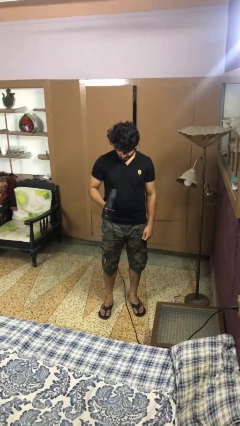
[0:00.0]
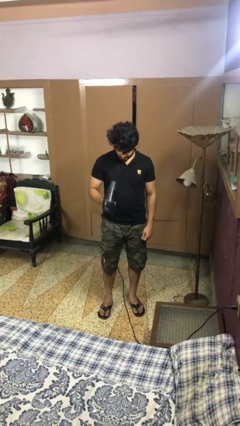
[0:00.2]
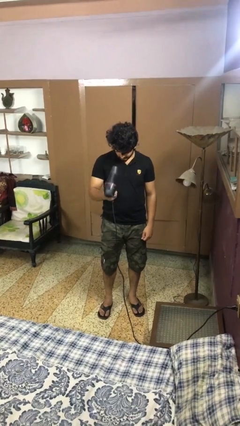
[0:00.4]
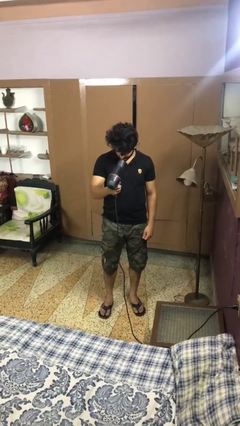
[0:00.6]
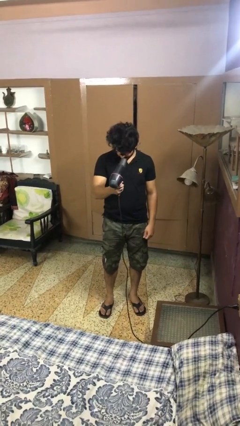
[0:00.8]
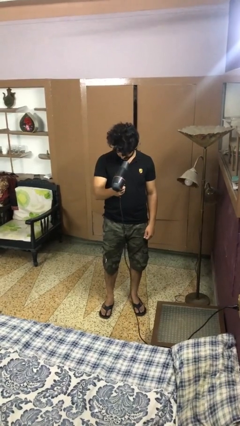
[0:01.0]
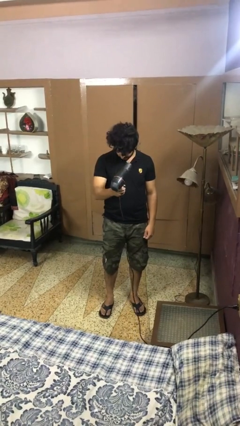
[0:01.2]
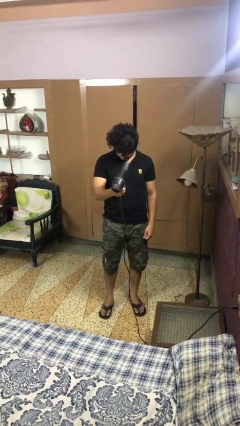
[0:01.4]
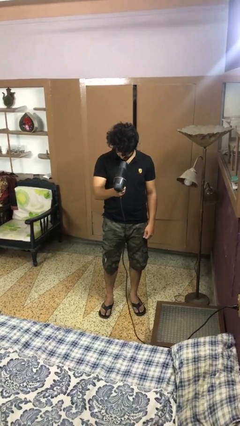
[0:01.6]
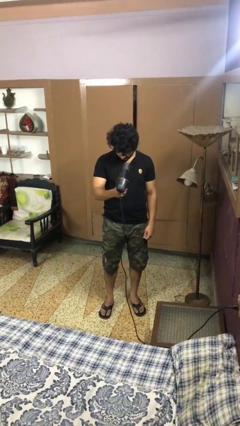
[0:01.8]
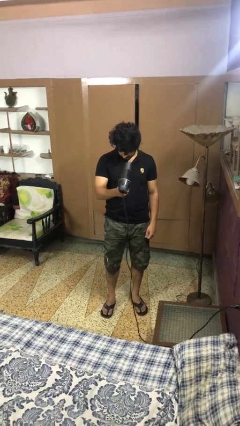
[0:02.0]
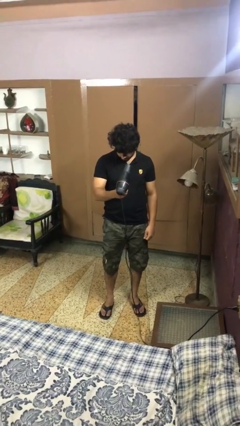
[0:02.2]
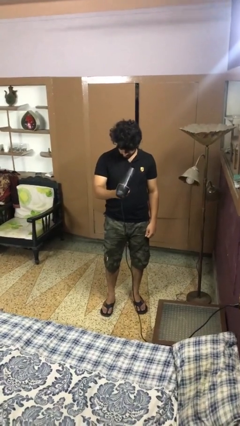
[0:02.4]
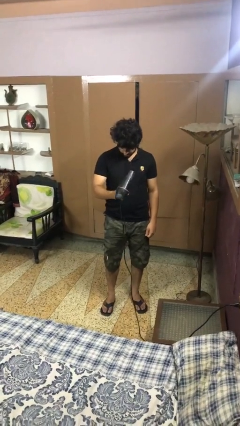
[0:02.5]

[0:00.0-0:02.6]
person dries hair with hairdryer

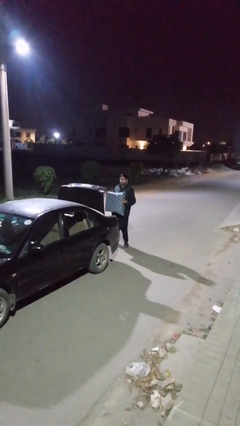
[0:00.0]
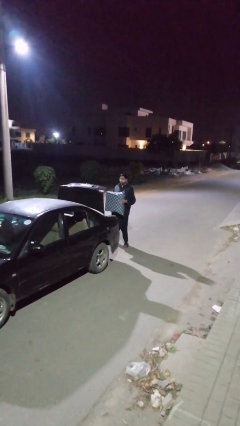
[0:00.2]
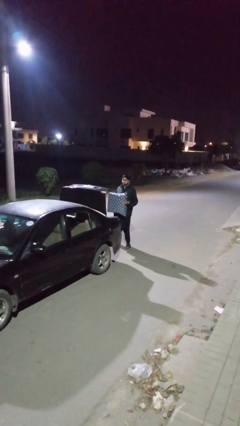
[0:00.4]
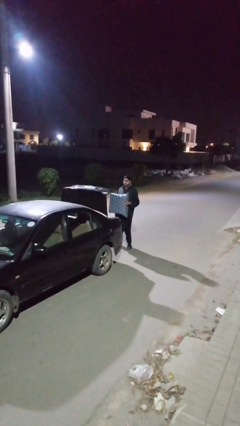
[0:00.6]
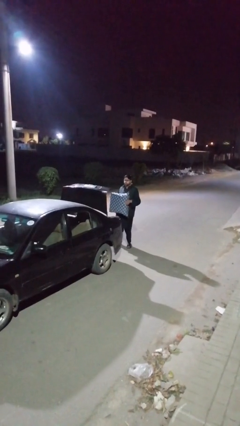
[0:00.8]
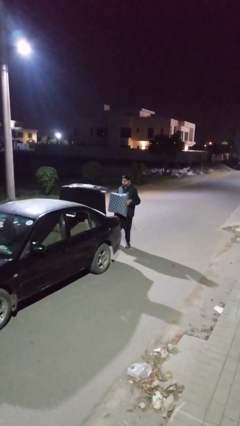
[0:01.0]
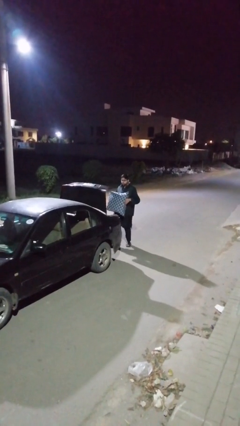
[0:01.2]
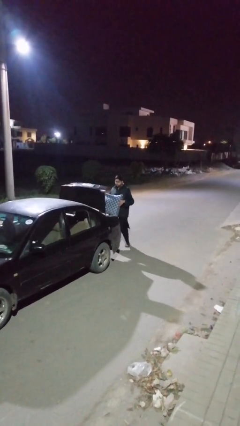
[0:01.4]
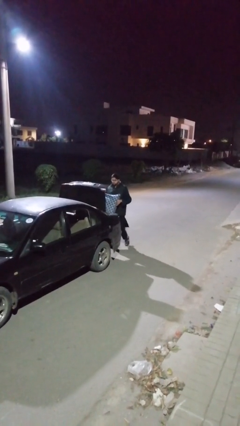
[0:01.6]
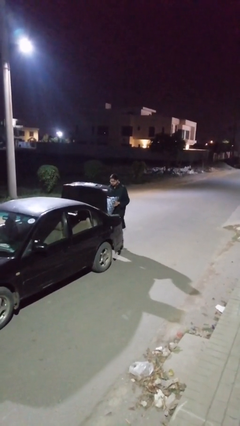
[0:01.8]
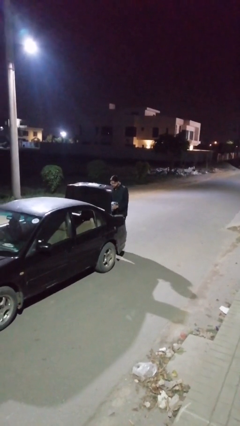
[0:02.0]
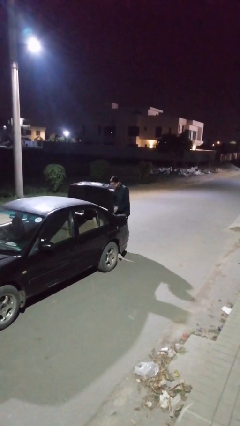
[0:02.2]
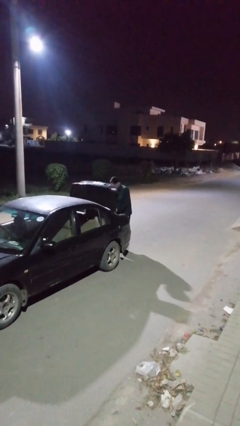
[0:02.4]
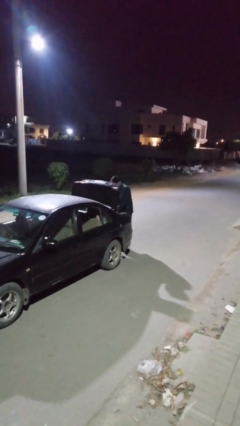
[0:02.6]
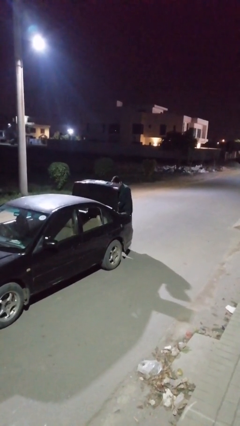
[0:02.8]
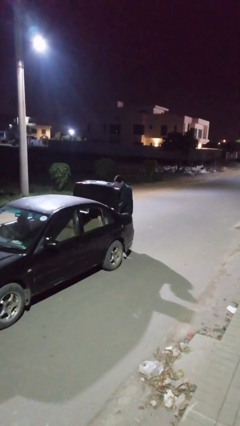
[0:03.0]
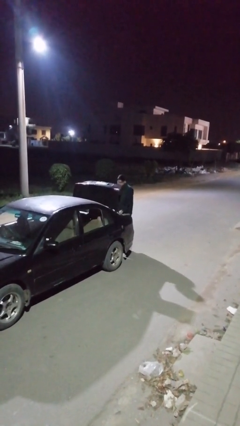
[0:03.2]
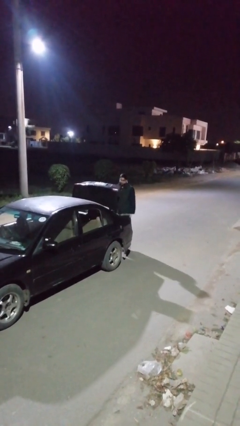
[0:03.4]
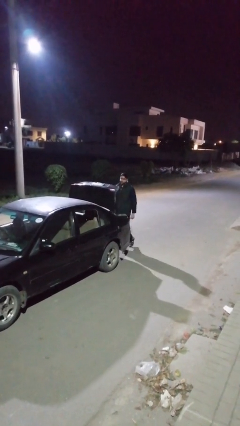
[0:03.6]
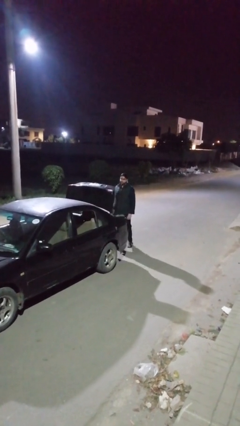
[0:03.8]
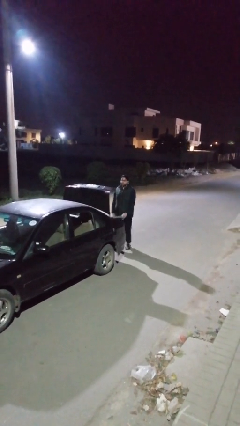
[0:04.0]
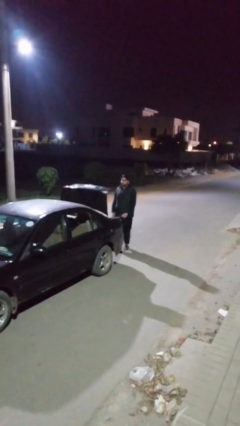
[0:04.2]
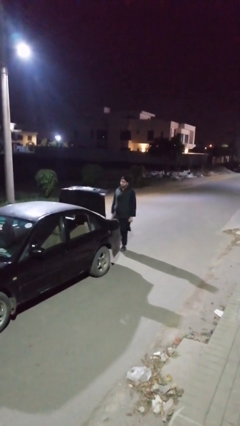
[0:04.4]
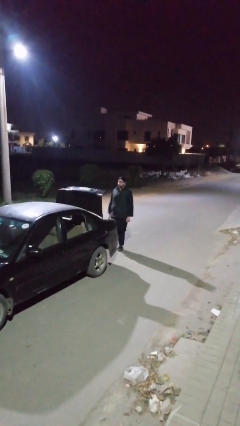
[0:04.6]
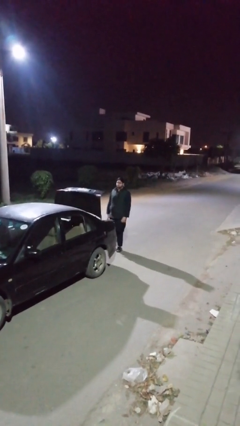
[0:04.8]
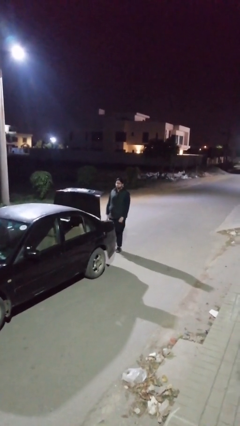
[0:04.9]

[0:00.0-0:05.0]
person loads car

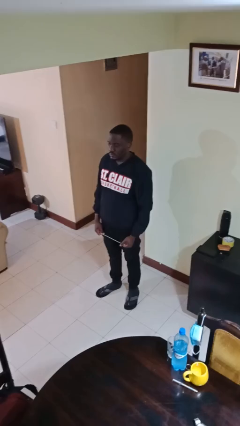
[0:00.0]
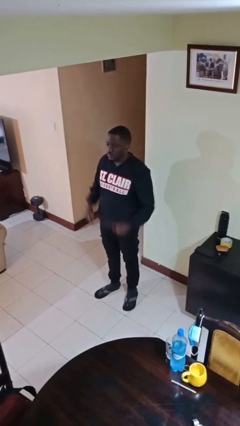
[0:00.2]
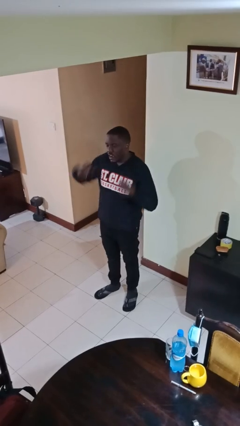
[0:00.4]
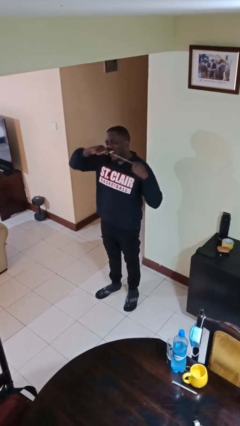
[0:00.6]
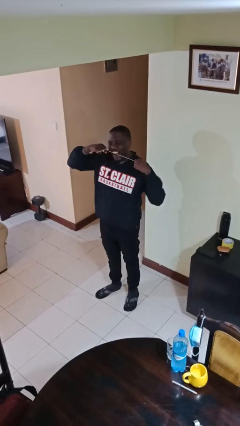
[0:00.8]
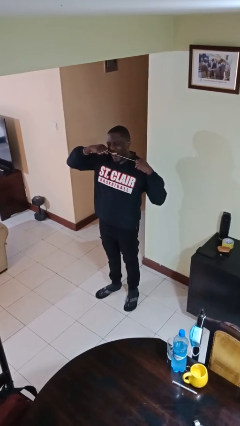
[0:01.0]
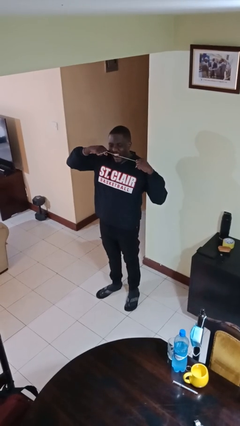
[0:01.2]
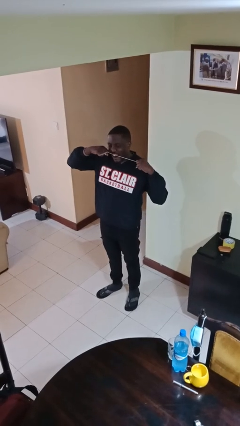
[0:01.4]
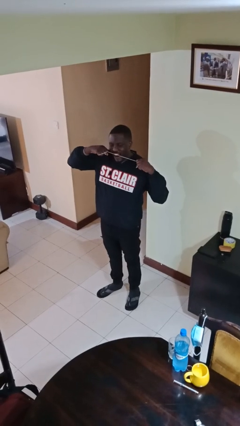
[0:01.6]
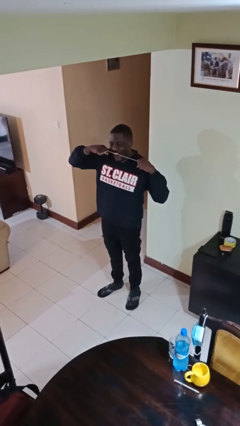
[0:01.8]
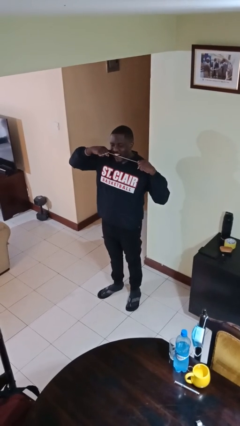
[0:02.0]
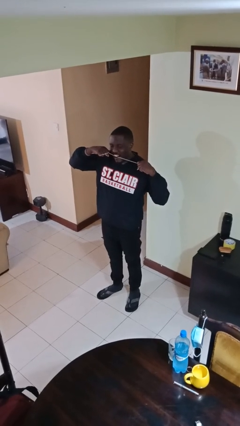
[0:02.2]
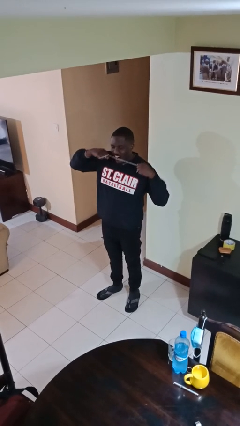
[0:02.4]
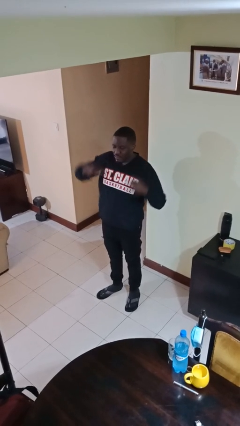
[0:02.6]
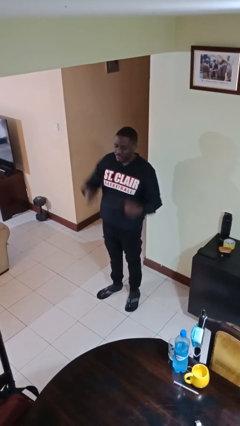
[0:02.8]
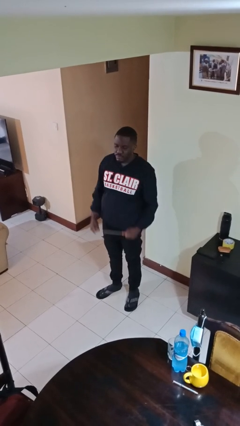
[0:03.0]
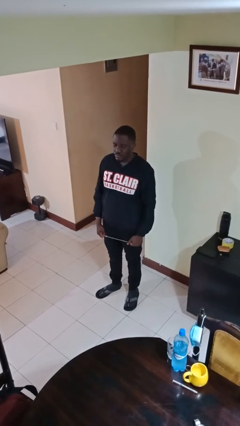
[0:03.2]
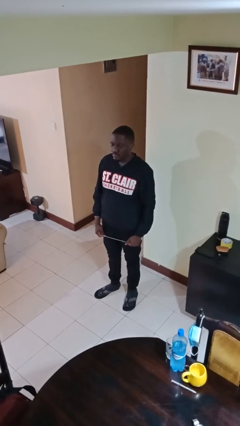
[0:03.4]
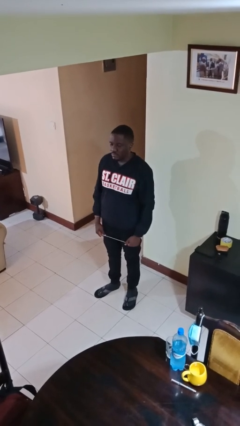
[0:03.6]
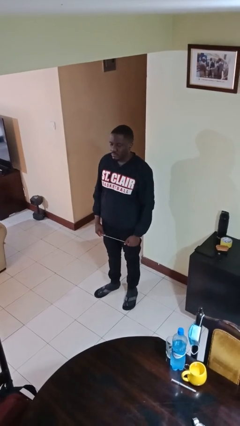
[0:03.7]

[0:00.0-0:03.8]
person flosses

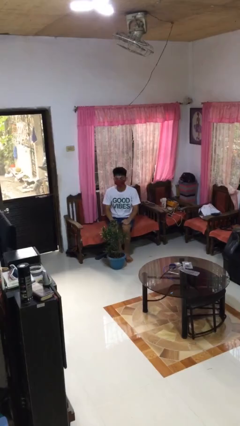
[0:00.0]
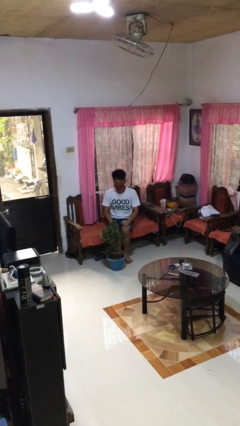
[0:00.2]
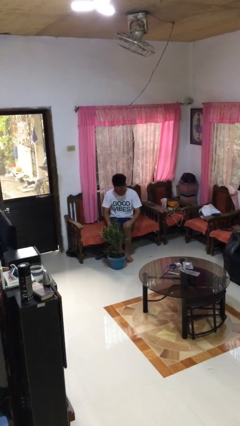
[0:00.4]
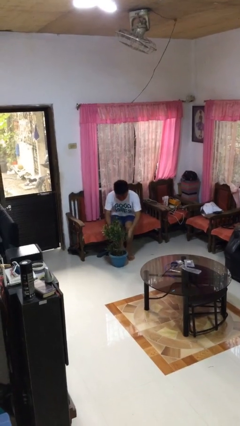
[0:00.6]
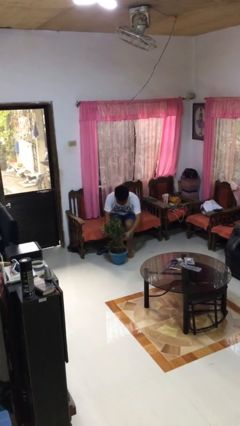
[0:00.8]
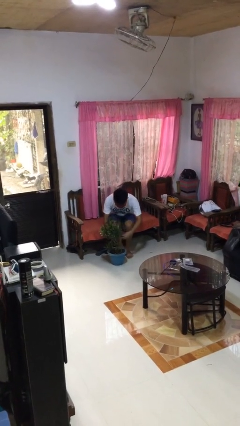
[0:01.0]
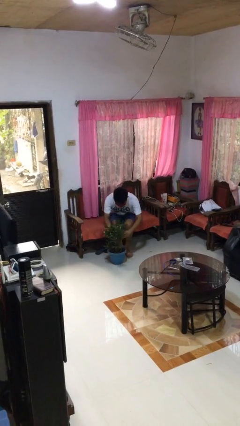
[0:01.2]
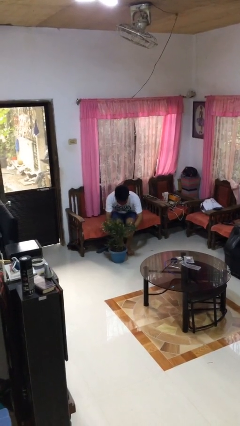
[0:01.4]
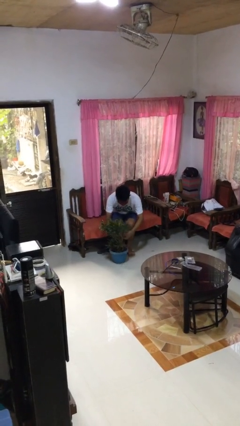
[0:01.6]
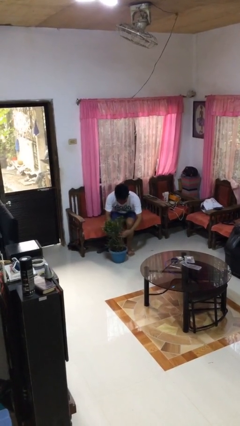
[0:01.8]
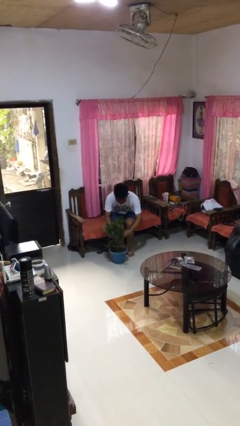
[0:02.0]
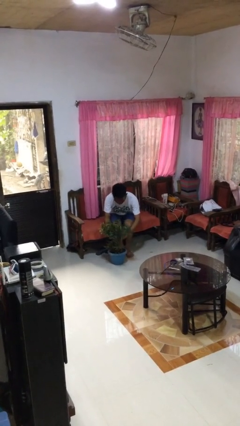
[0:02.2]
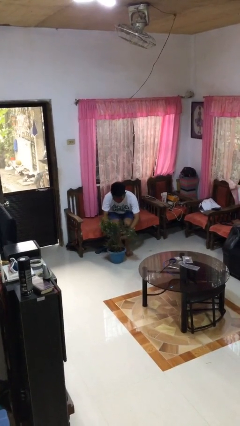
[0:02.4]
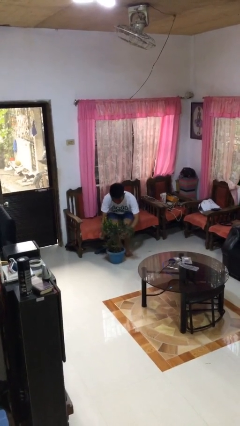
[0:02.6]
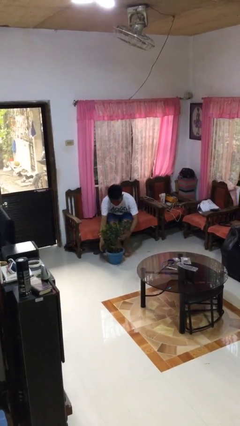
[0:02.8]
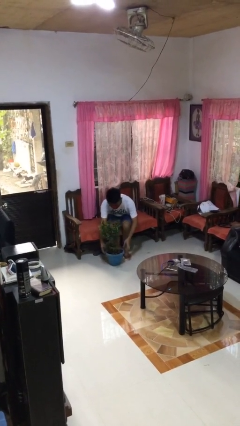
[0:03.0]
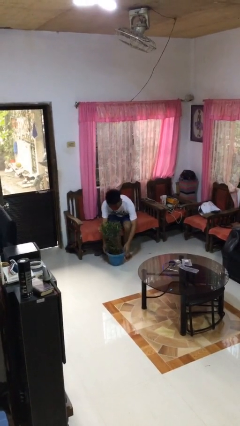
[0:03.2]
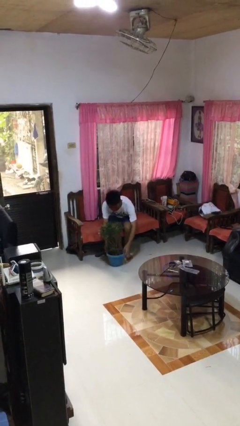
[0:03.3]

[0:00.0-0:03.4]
person arranges flowers in vase

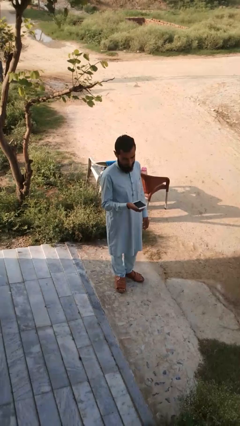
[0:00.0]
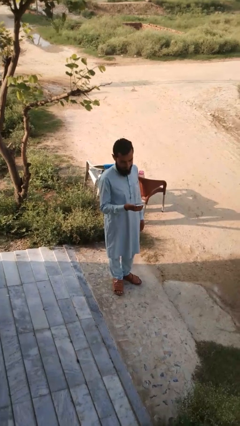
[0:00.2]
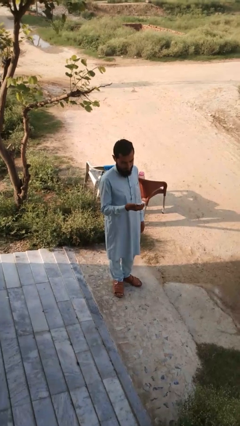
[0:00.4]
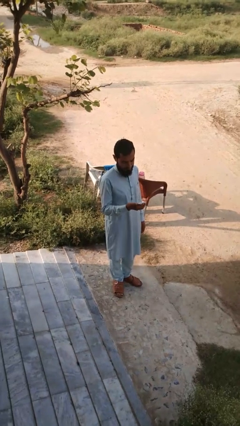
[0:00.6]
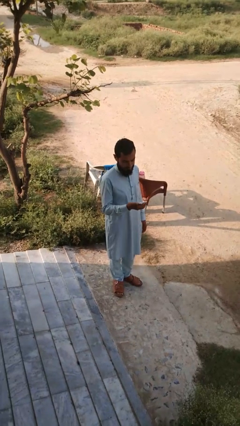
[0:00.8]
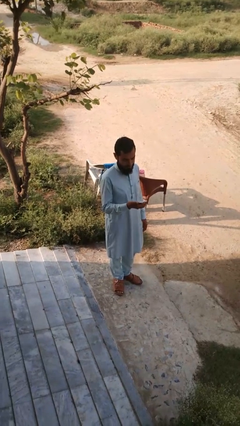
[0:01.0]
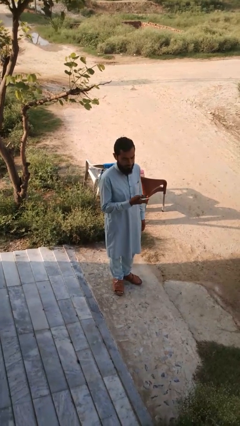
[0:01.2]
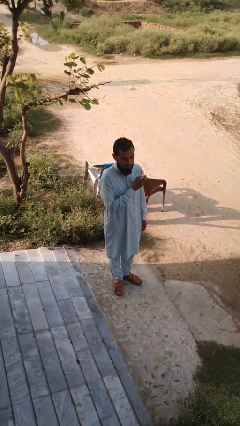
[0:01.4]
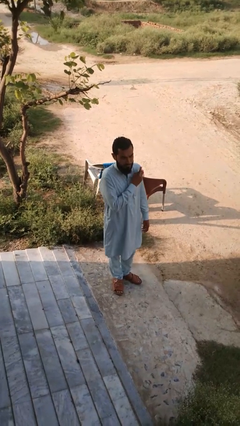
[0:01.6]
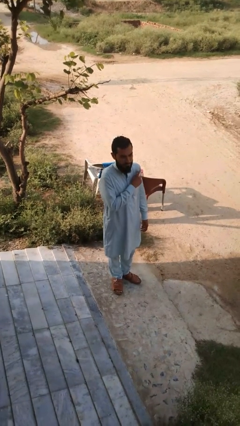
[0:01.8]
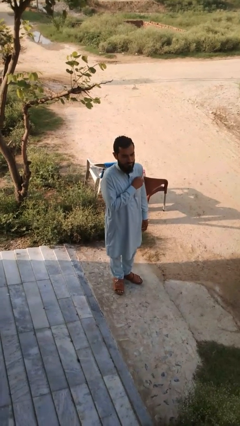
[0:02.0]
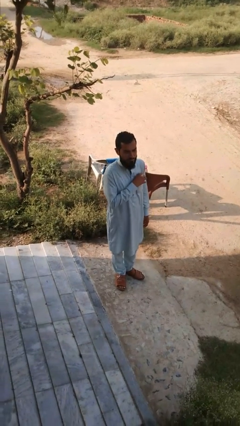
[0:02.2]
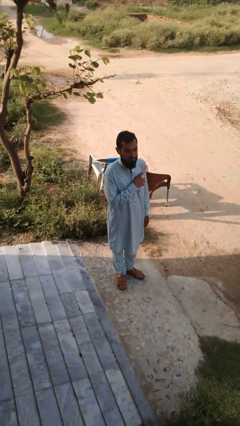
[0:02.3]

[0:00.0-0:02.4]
person puts phone into pocket

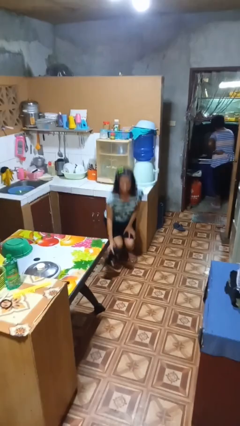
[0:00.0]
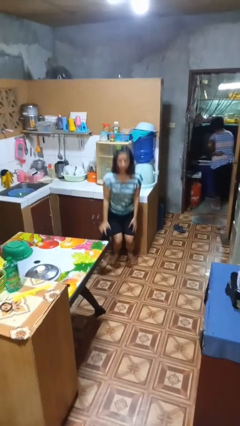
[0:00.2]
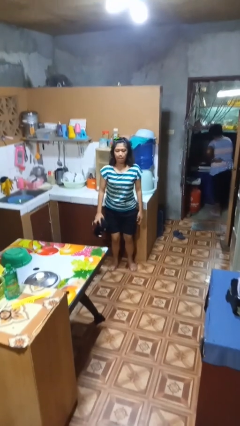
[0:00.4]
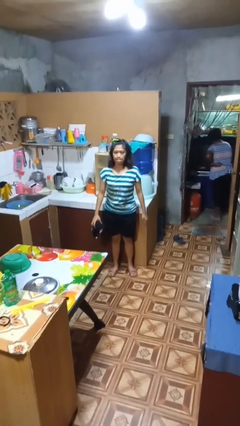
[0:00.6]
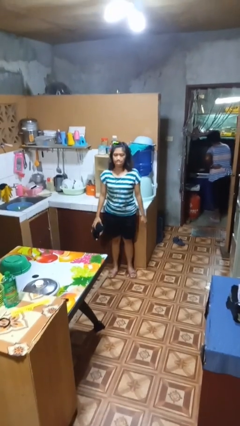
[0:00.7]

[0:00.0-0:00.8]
person picks up object from floor
